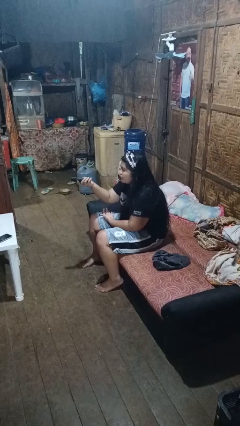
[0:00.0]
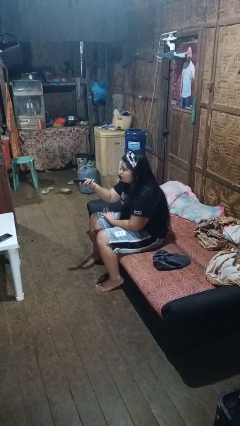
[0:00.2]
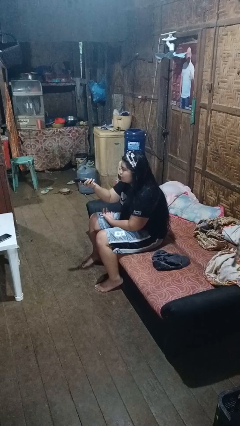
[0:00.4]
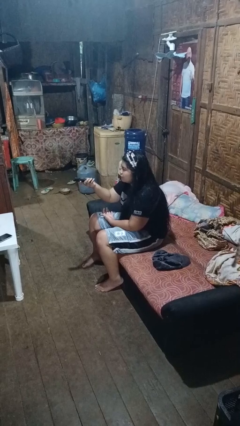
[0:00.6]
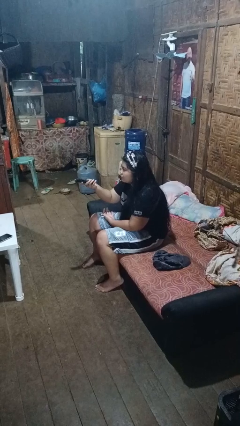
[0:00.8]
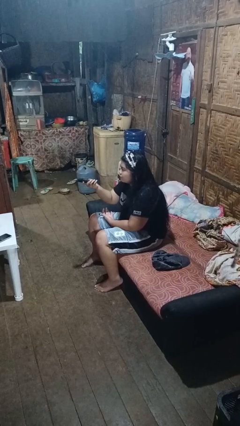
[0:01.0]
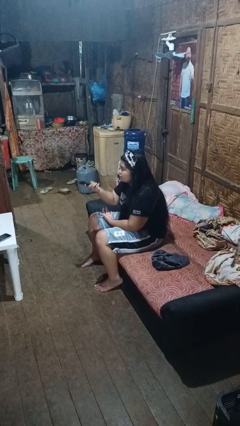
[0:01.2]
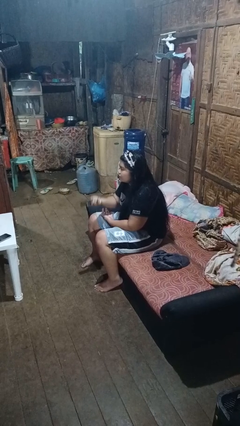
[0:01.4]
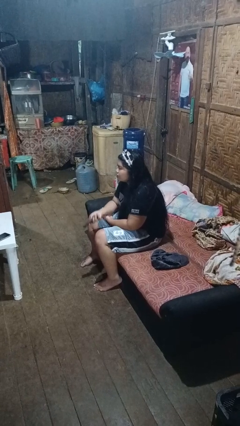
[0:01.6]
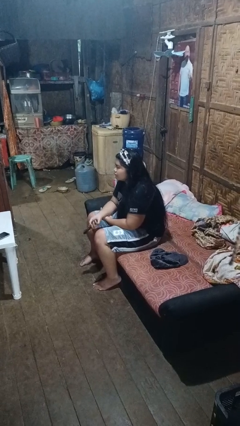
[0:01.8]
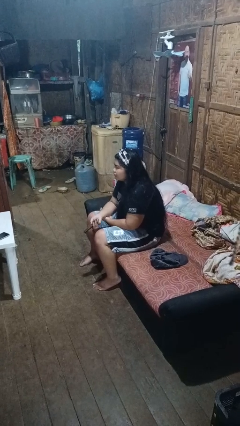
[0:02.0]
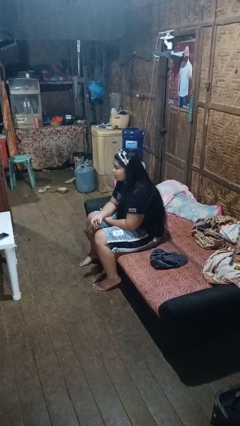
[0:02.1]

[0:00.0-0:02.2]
person uses television remote

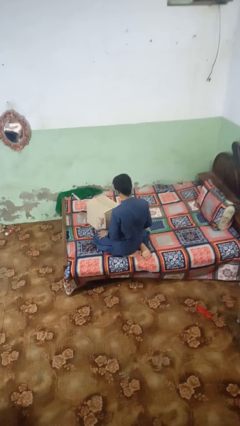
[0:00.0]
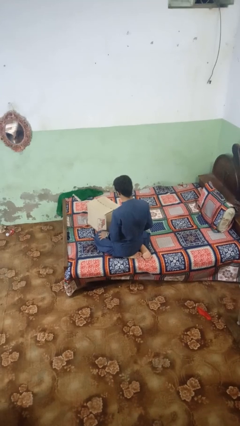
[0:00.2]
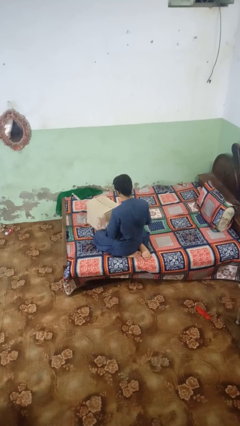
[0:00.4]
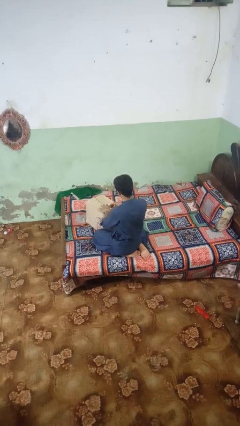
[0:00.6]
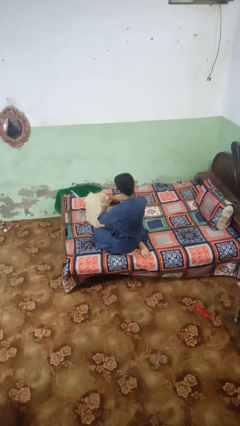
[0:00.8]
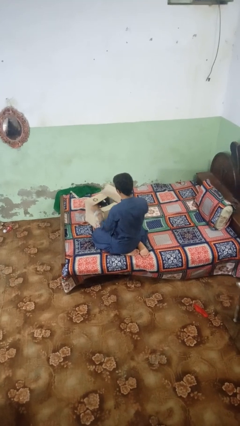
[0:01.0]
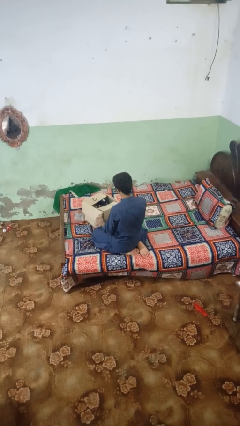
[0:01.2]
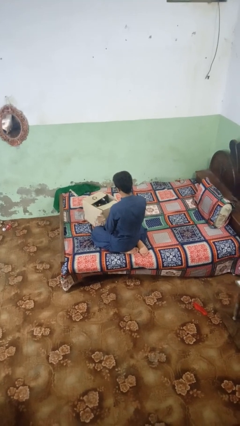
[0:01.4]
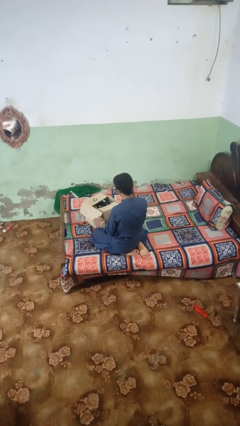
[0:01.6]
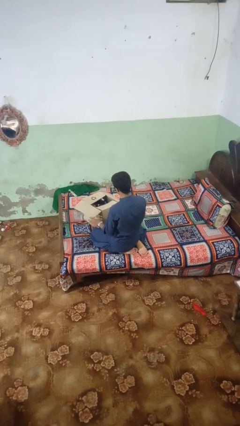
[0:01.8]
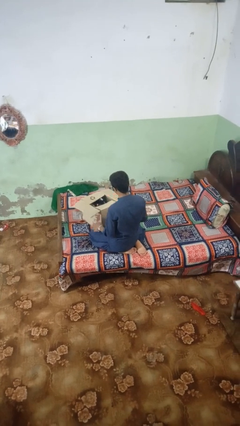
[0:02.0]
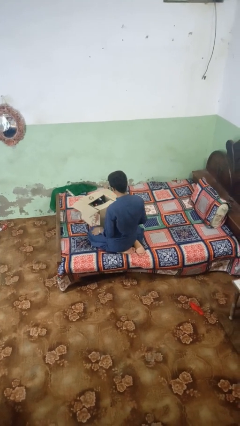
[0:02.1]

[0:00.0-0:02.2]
person opens box

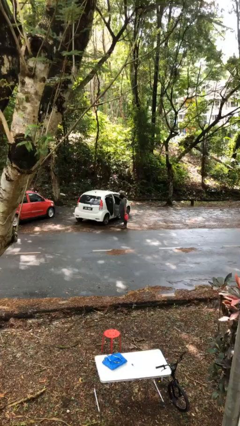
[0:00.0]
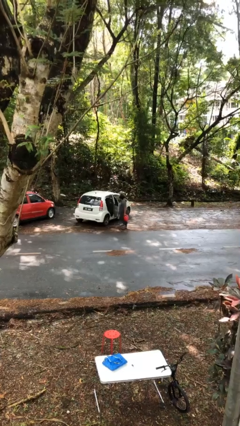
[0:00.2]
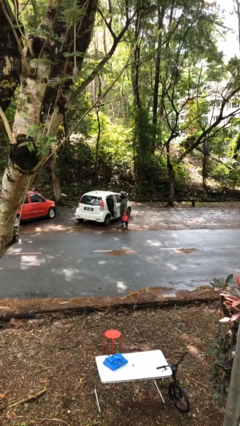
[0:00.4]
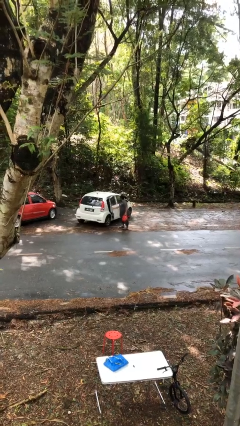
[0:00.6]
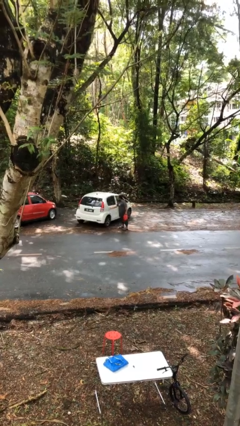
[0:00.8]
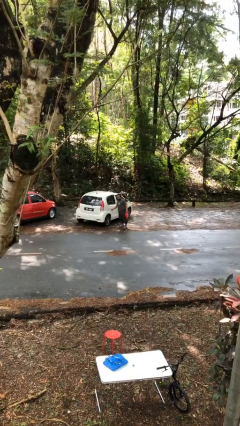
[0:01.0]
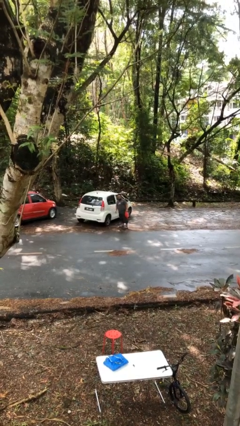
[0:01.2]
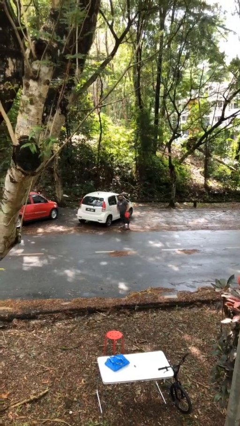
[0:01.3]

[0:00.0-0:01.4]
person closes car door

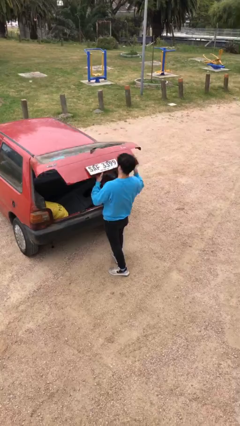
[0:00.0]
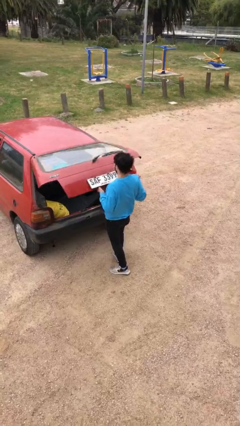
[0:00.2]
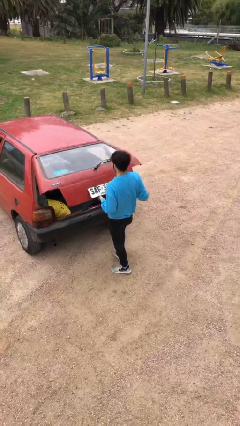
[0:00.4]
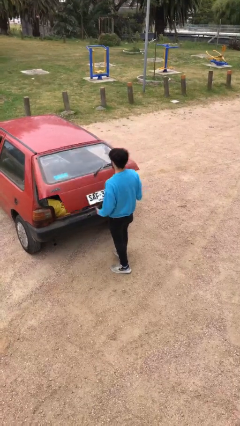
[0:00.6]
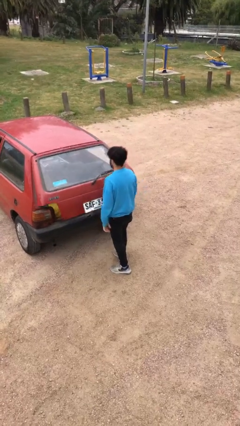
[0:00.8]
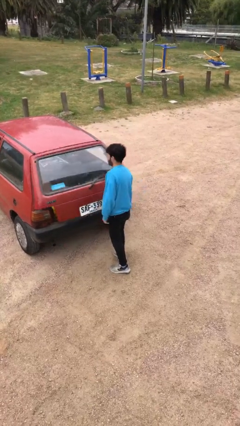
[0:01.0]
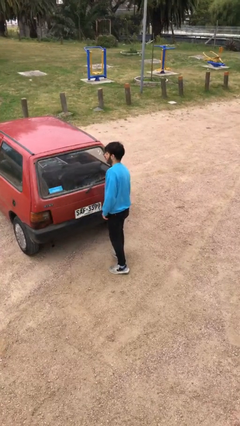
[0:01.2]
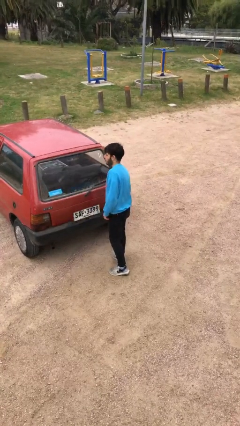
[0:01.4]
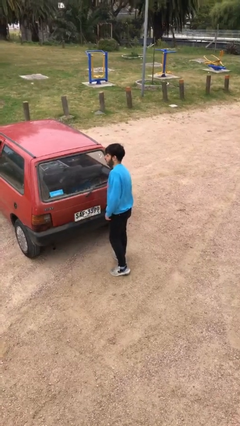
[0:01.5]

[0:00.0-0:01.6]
person closes car trunk

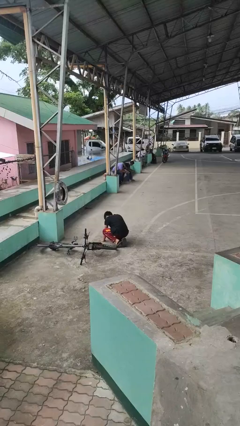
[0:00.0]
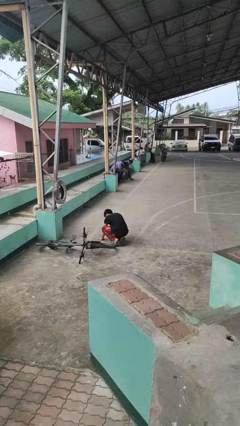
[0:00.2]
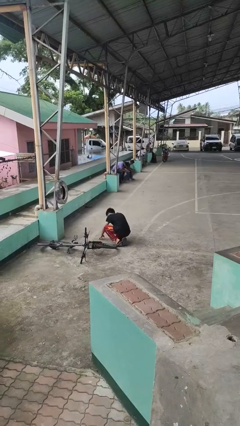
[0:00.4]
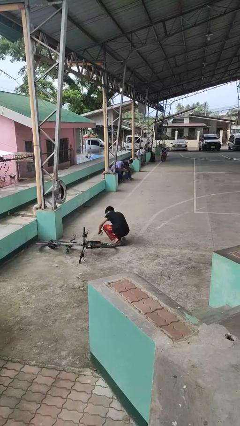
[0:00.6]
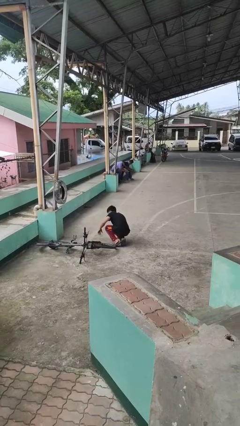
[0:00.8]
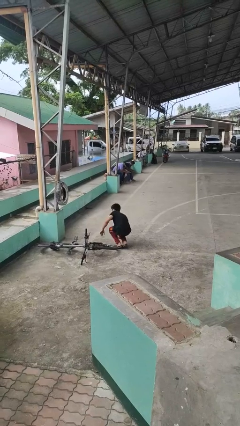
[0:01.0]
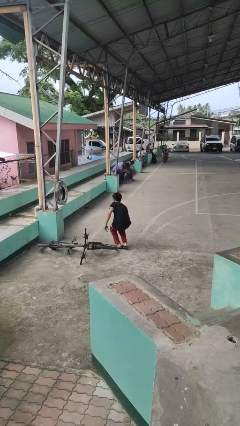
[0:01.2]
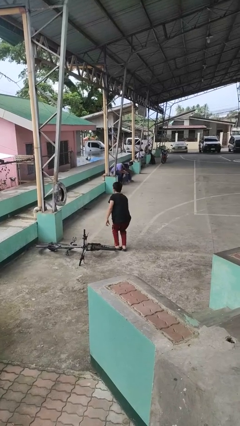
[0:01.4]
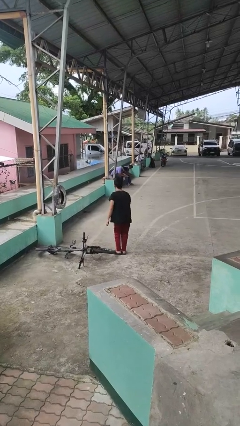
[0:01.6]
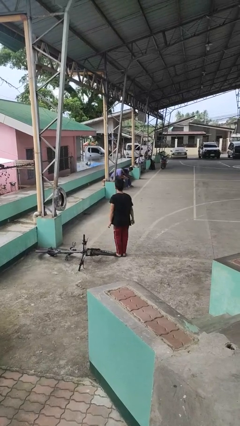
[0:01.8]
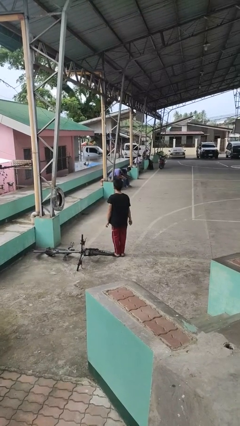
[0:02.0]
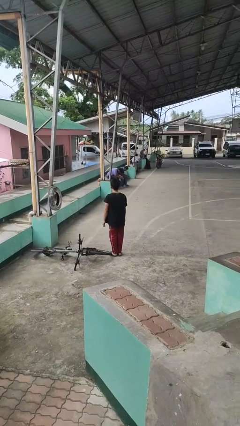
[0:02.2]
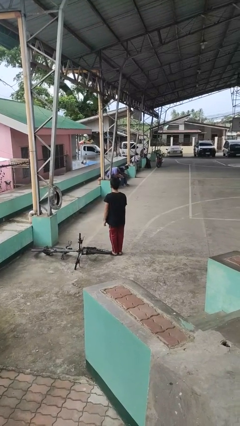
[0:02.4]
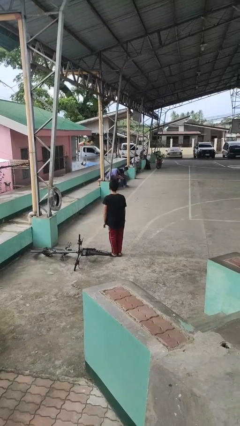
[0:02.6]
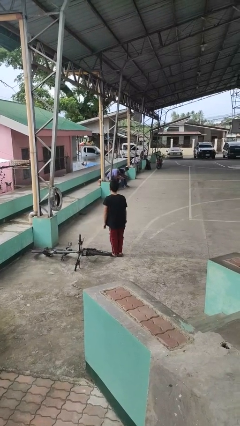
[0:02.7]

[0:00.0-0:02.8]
person stands up from floor

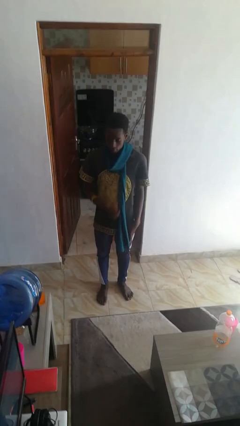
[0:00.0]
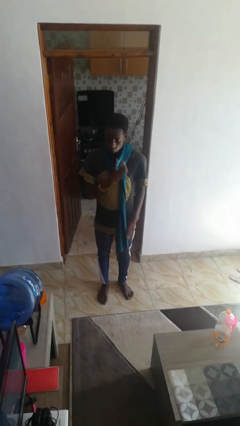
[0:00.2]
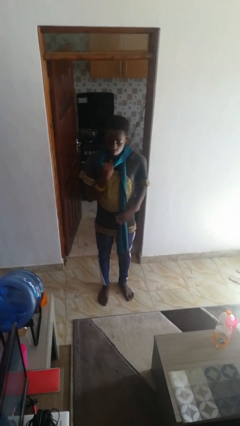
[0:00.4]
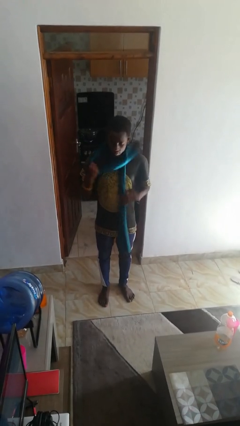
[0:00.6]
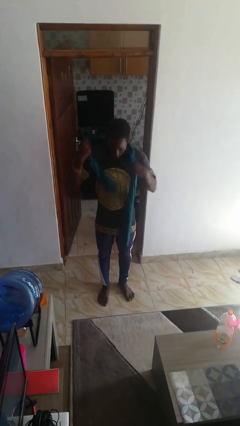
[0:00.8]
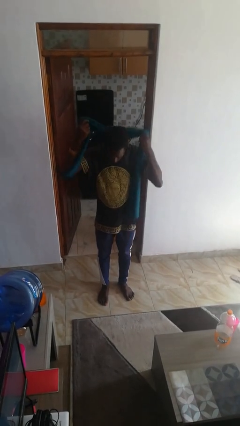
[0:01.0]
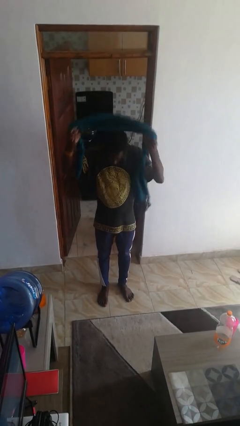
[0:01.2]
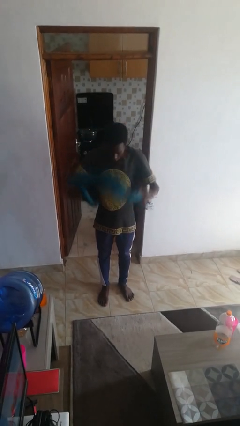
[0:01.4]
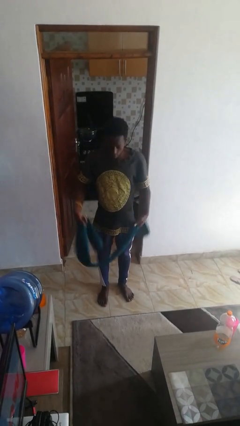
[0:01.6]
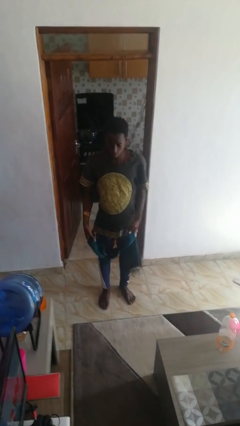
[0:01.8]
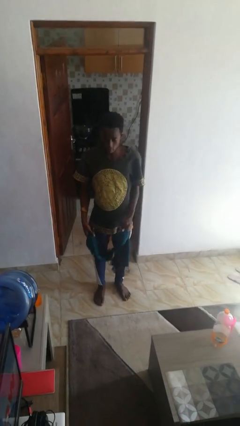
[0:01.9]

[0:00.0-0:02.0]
person takes off scarf

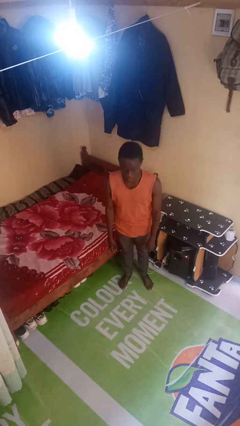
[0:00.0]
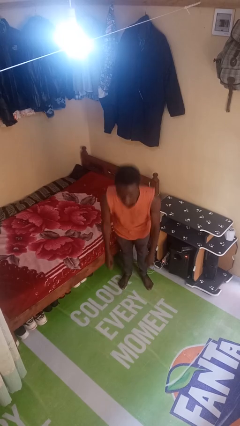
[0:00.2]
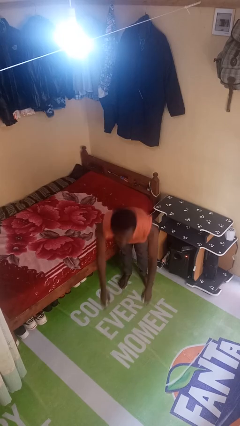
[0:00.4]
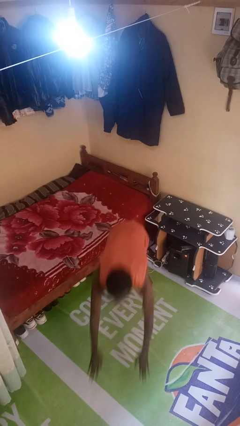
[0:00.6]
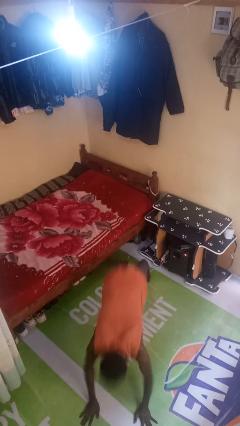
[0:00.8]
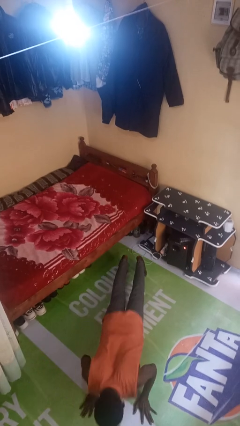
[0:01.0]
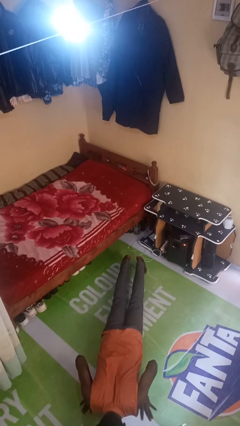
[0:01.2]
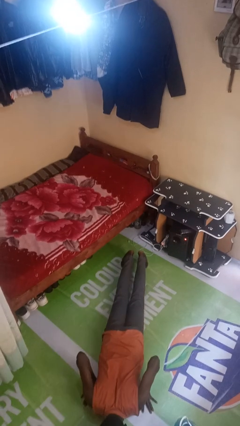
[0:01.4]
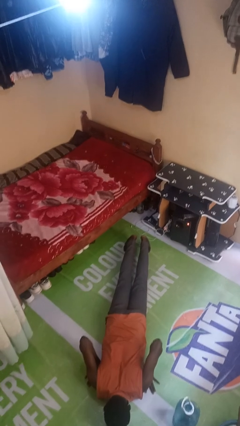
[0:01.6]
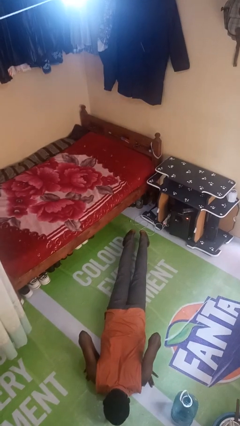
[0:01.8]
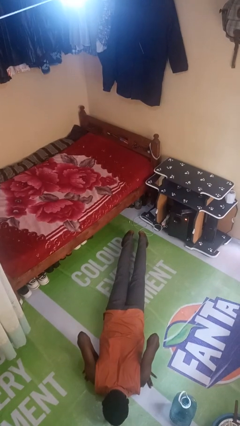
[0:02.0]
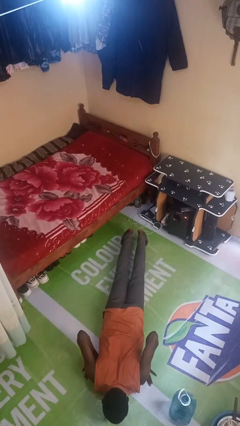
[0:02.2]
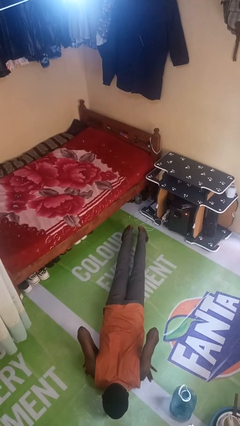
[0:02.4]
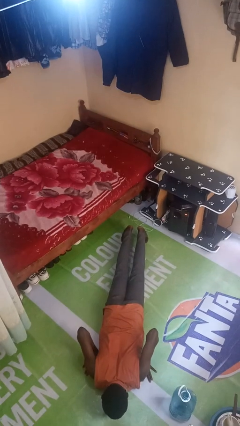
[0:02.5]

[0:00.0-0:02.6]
person falls while standing

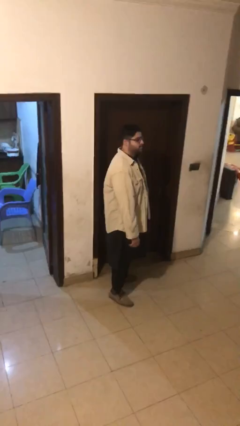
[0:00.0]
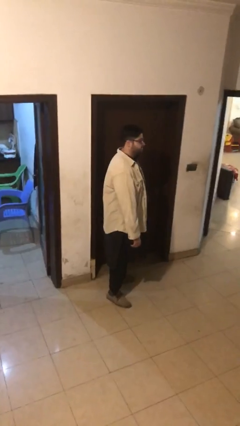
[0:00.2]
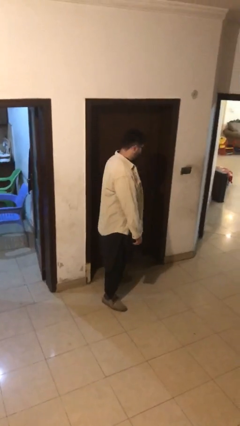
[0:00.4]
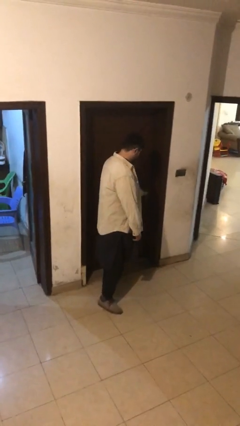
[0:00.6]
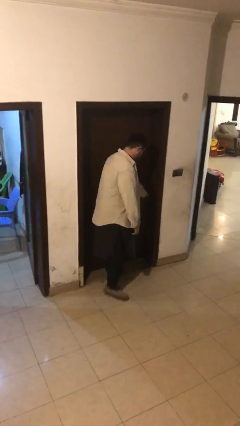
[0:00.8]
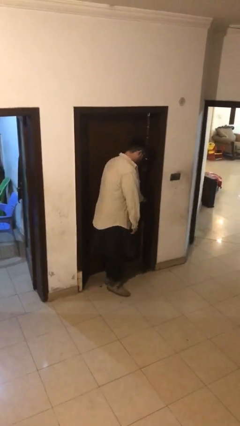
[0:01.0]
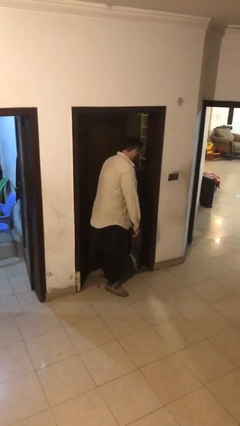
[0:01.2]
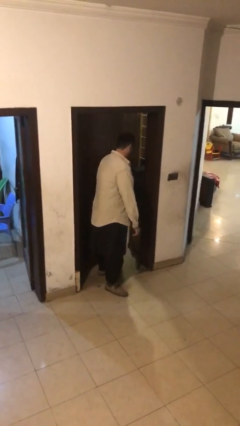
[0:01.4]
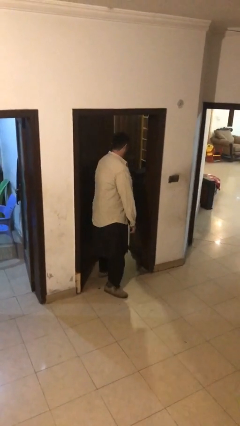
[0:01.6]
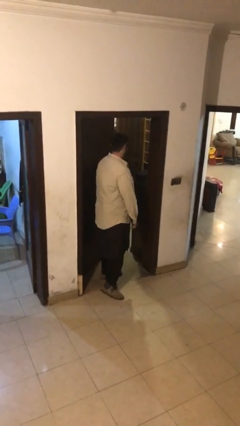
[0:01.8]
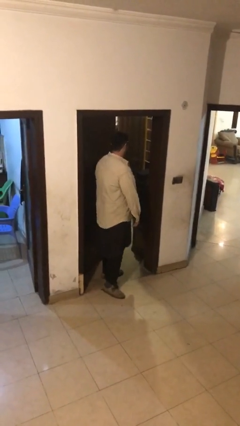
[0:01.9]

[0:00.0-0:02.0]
person opens facility door
